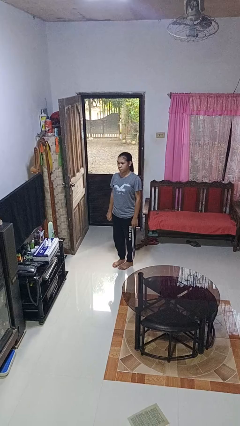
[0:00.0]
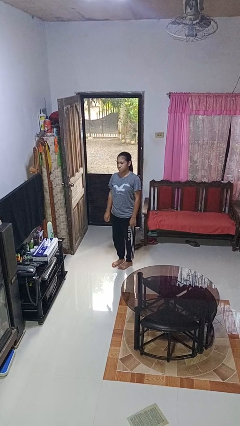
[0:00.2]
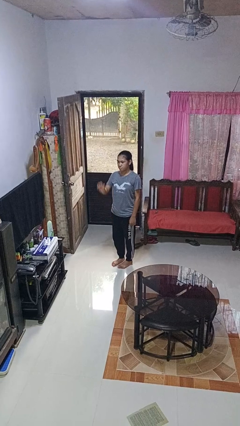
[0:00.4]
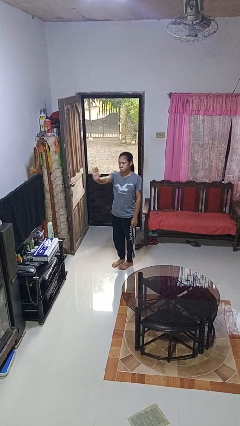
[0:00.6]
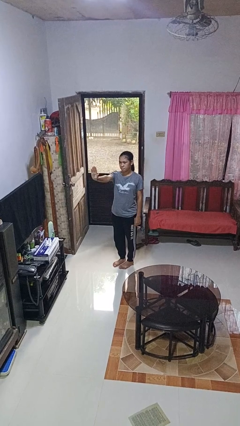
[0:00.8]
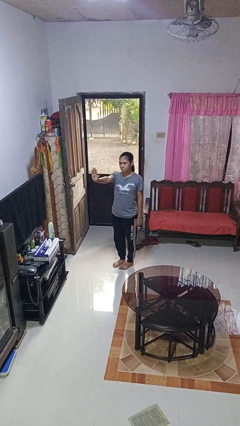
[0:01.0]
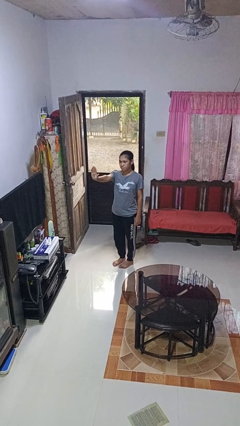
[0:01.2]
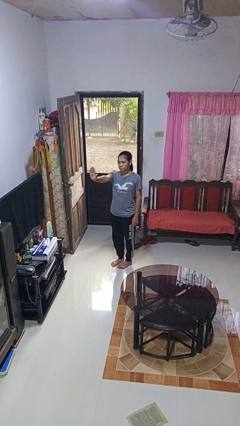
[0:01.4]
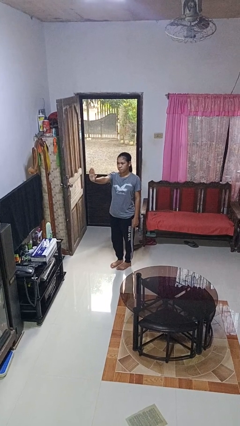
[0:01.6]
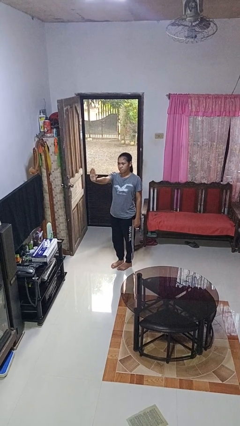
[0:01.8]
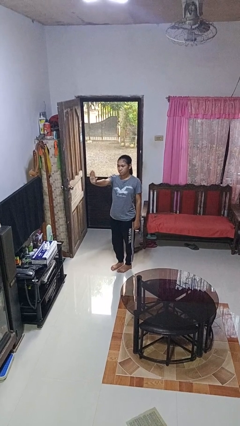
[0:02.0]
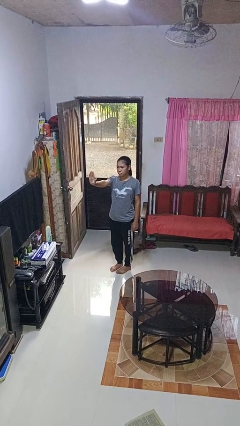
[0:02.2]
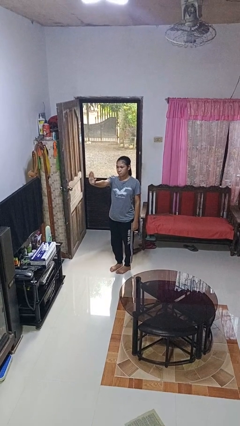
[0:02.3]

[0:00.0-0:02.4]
person gestures stop

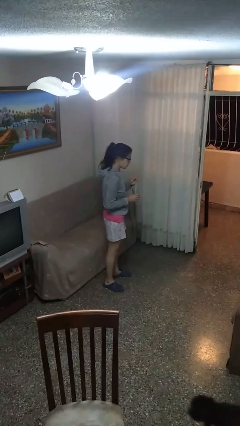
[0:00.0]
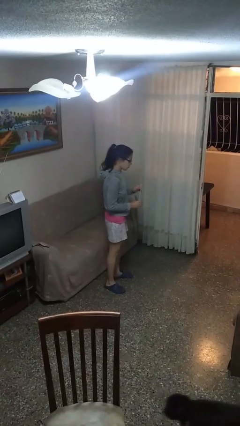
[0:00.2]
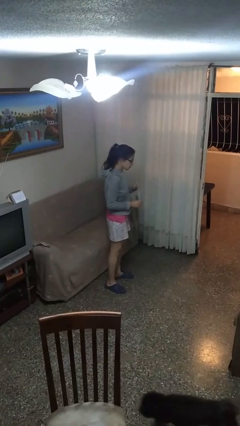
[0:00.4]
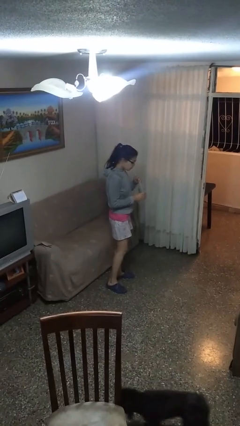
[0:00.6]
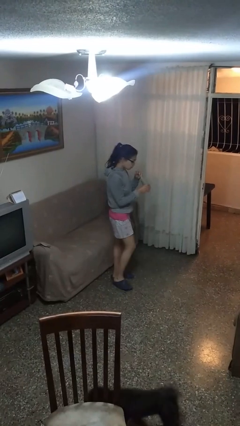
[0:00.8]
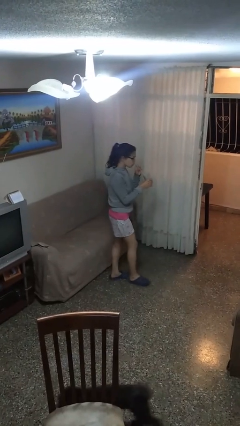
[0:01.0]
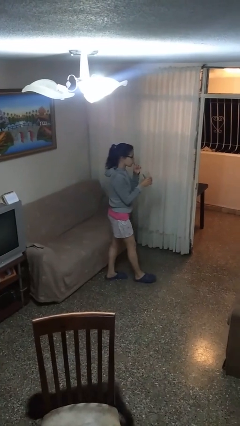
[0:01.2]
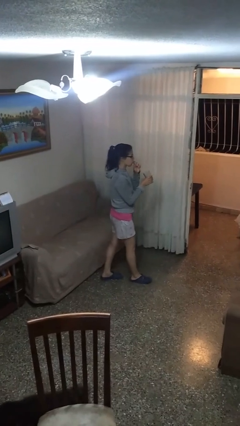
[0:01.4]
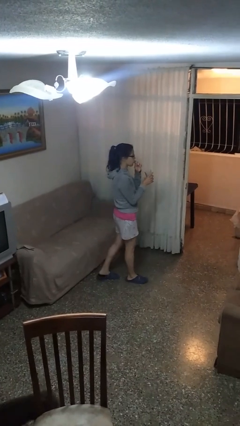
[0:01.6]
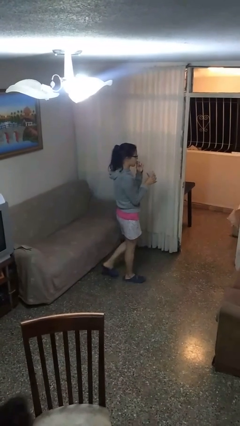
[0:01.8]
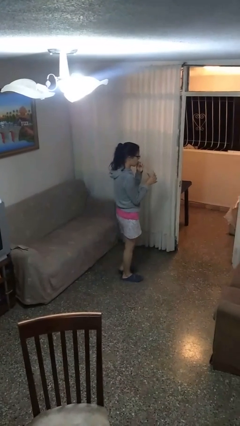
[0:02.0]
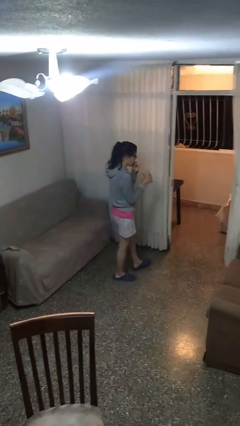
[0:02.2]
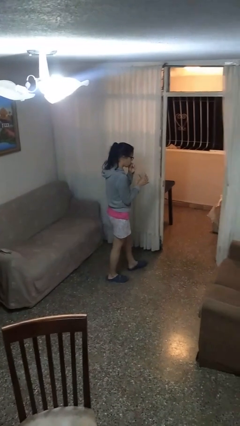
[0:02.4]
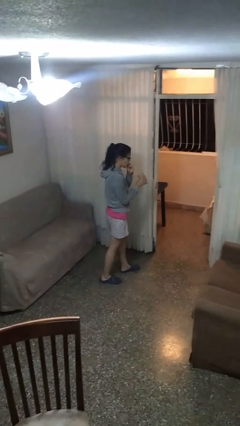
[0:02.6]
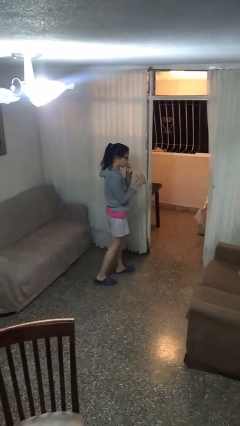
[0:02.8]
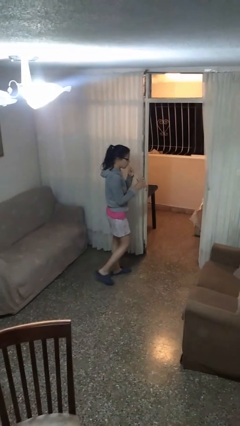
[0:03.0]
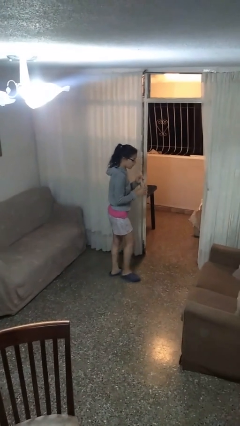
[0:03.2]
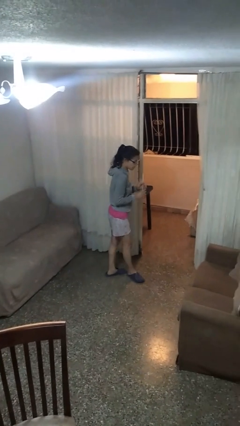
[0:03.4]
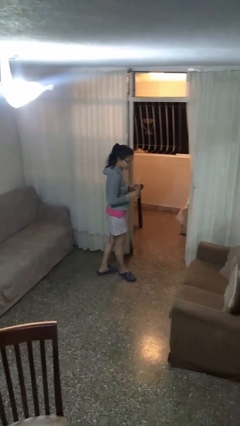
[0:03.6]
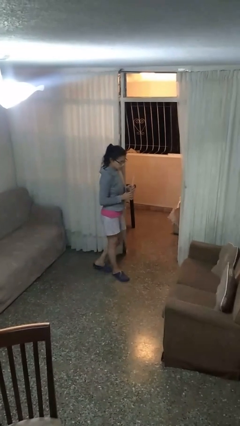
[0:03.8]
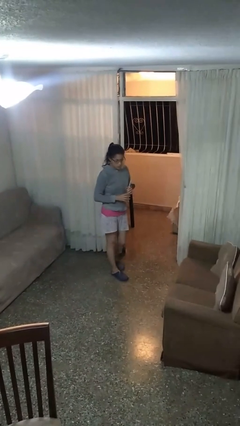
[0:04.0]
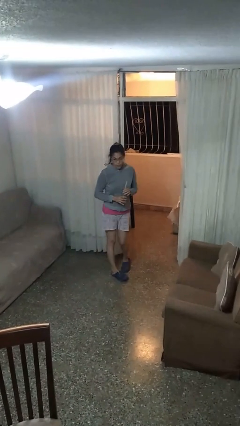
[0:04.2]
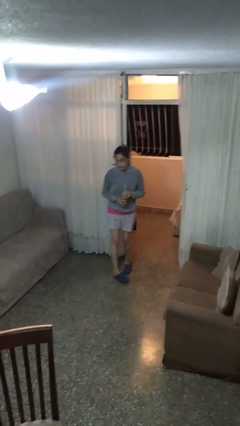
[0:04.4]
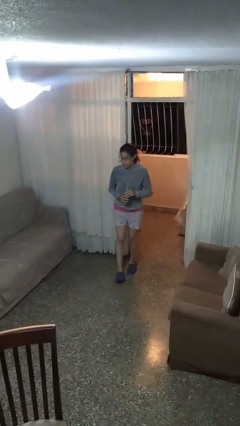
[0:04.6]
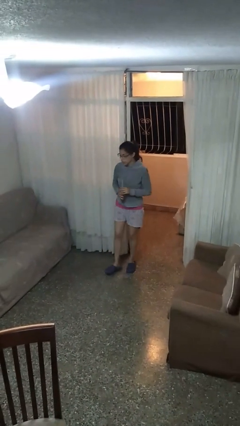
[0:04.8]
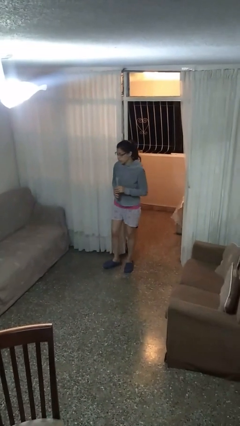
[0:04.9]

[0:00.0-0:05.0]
person drinks from straw

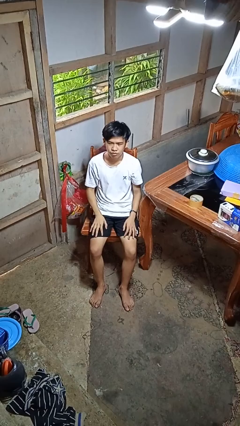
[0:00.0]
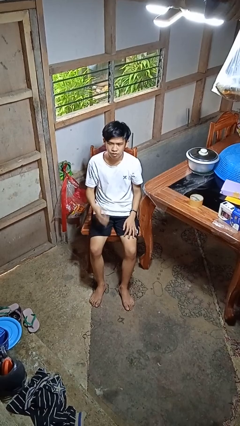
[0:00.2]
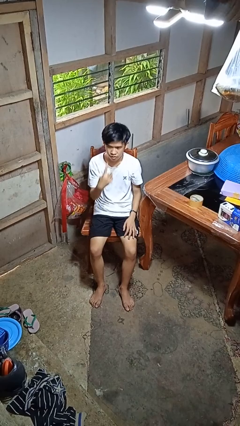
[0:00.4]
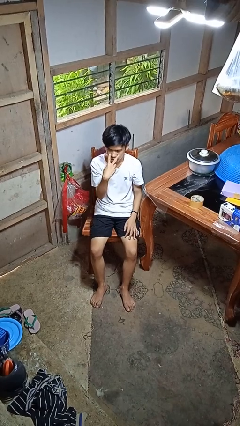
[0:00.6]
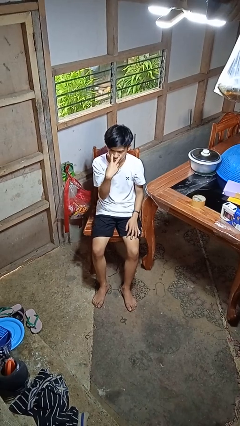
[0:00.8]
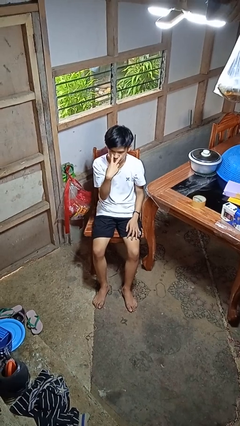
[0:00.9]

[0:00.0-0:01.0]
person gestures watch closely

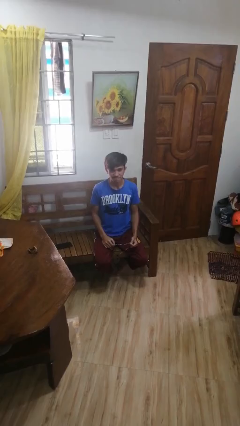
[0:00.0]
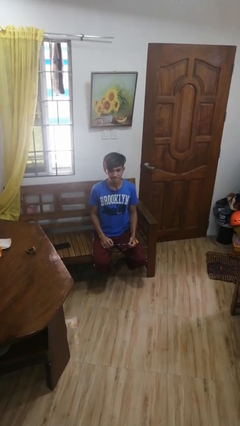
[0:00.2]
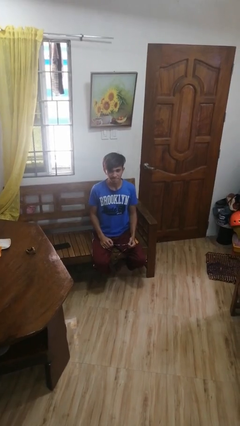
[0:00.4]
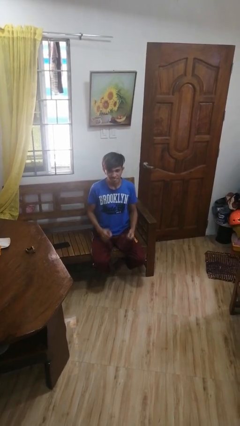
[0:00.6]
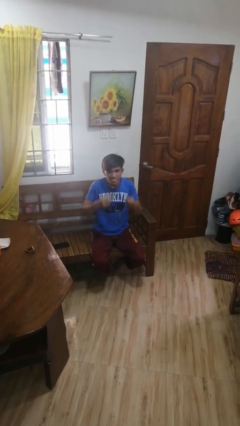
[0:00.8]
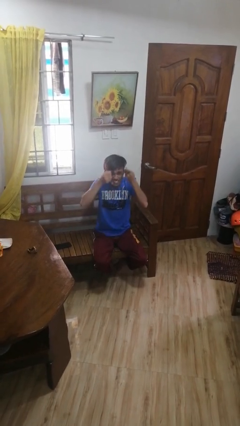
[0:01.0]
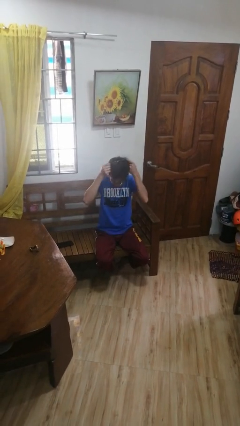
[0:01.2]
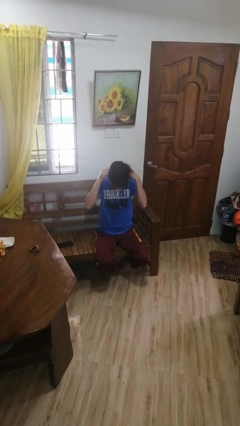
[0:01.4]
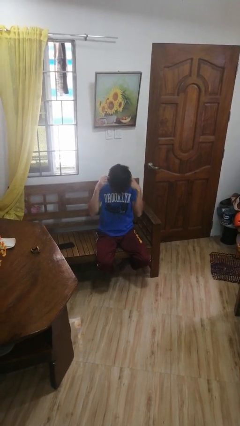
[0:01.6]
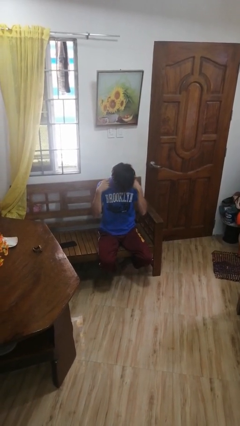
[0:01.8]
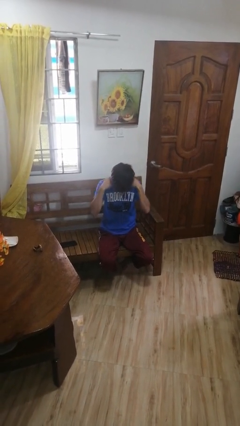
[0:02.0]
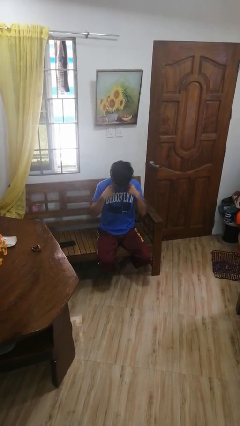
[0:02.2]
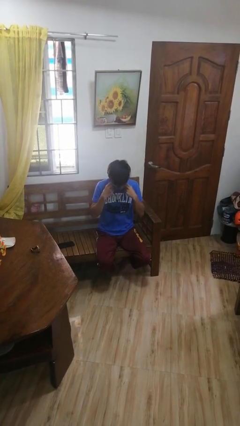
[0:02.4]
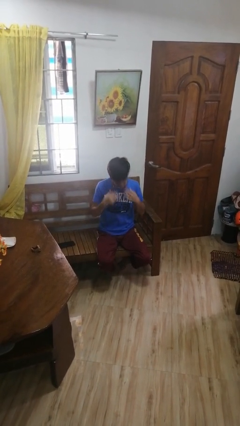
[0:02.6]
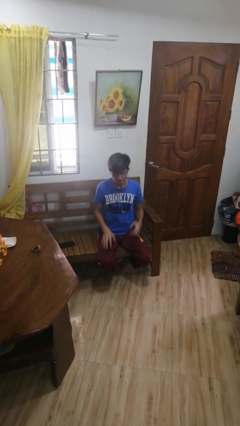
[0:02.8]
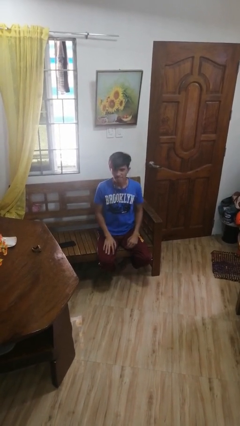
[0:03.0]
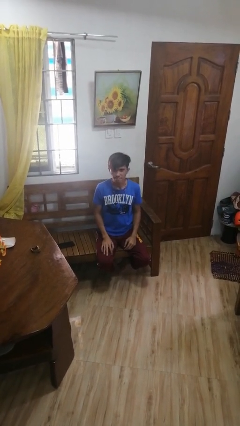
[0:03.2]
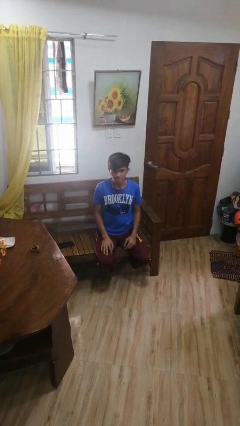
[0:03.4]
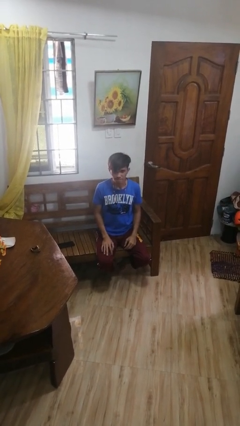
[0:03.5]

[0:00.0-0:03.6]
person puts on necklace

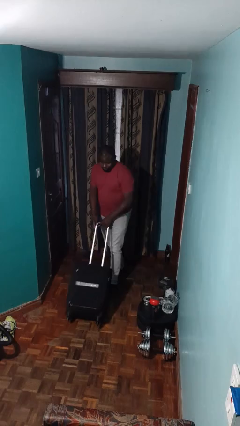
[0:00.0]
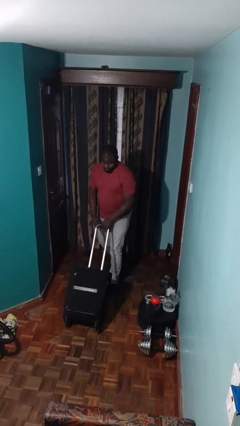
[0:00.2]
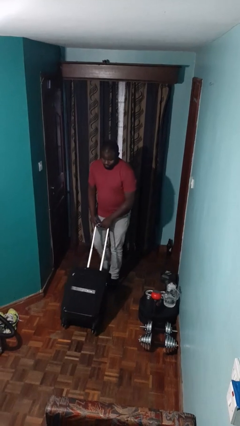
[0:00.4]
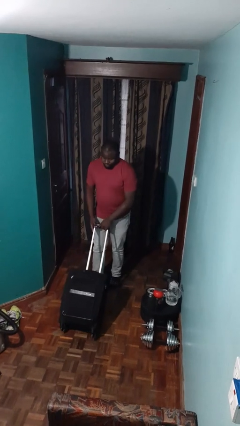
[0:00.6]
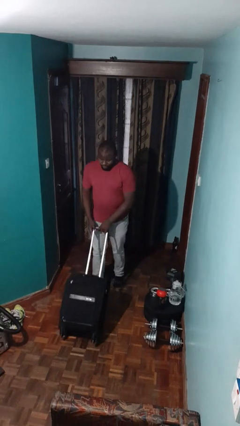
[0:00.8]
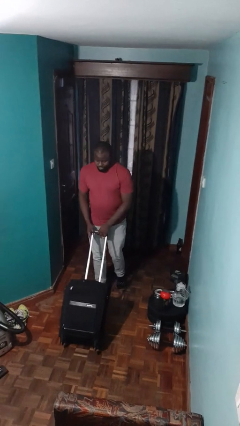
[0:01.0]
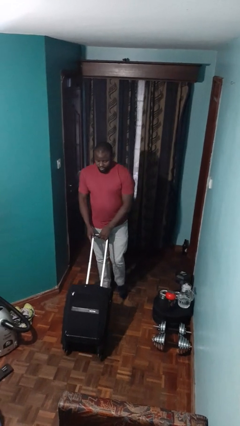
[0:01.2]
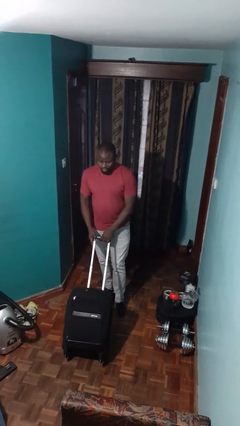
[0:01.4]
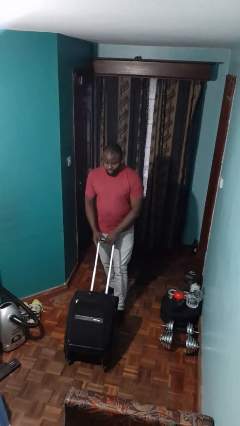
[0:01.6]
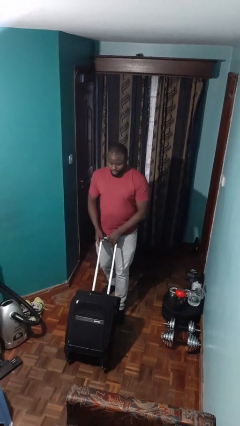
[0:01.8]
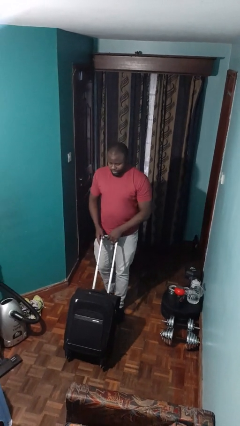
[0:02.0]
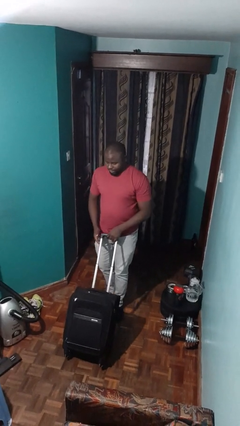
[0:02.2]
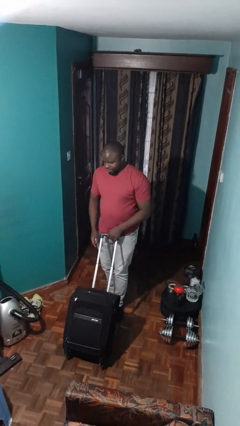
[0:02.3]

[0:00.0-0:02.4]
person pushes wheeled cart

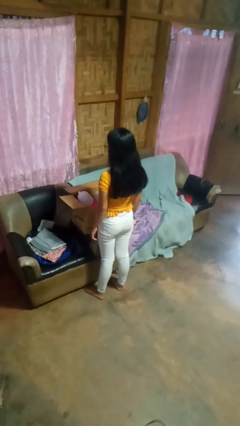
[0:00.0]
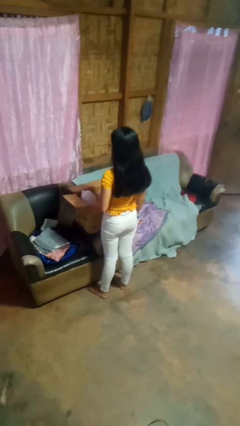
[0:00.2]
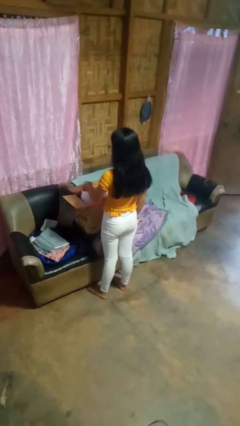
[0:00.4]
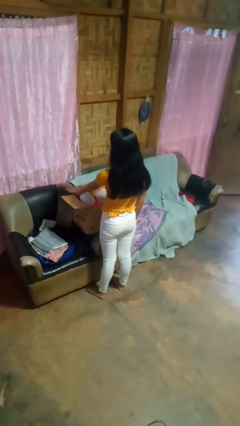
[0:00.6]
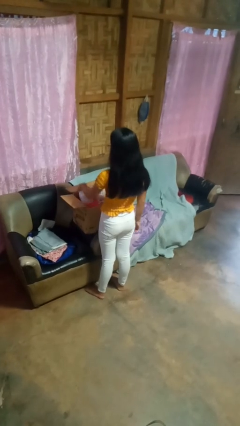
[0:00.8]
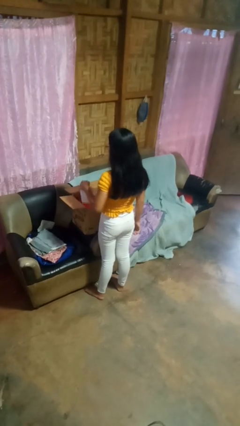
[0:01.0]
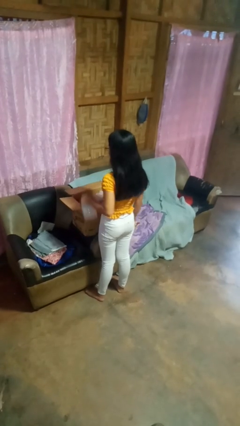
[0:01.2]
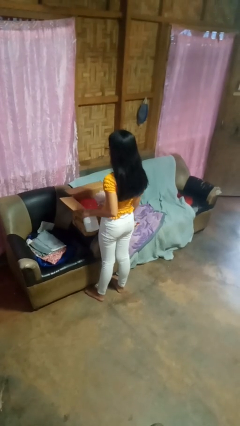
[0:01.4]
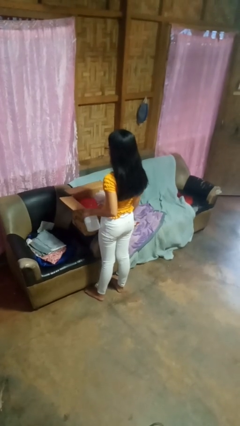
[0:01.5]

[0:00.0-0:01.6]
person takes object from box

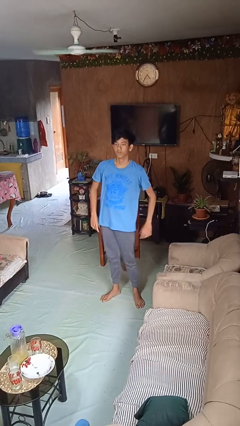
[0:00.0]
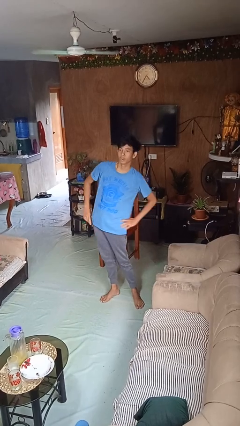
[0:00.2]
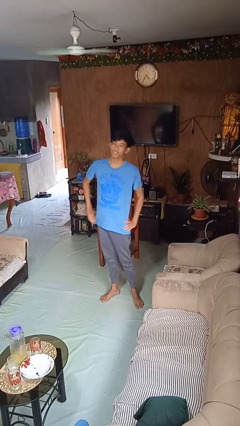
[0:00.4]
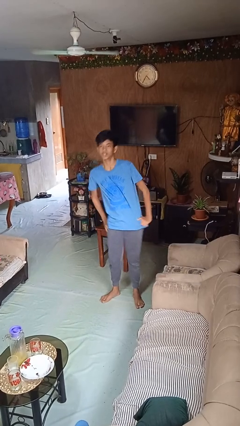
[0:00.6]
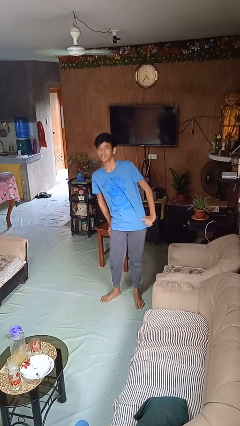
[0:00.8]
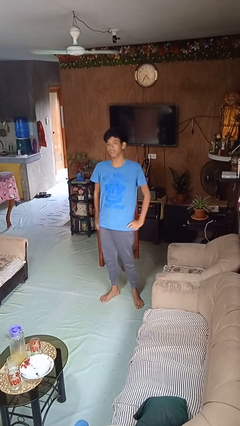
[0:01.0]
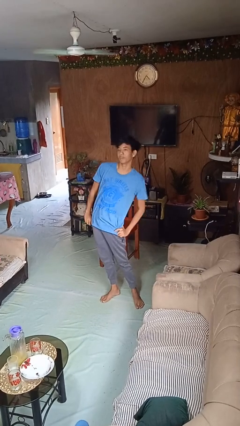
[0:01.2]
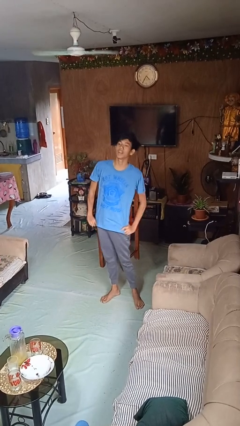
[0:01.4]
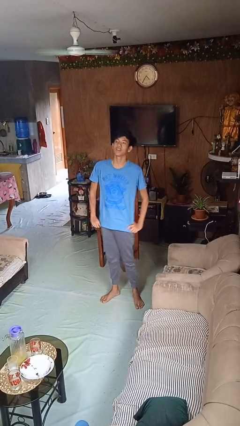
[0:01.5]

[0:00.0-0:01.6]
person dances in place
